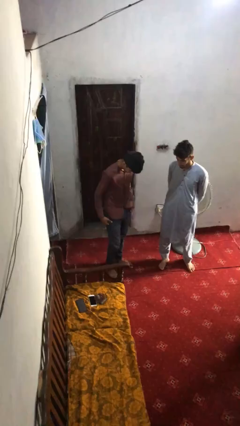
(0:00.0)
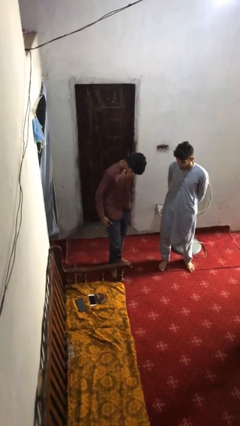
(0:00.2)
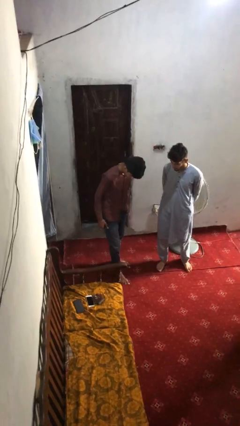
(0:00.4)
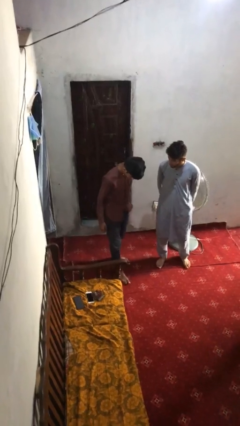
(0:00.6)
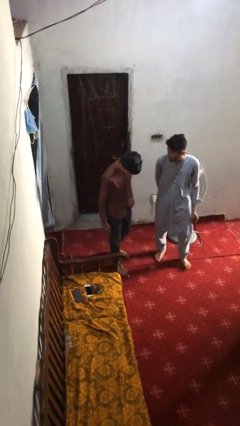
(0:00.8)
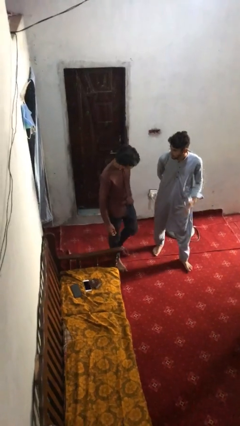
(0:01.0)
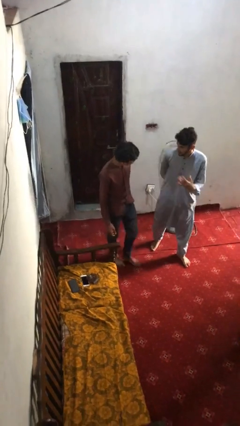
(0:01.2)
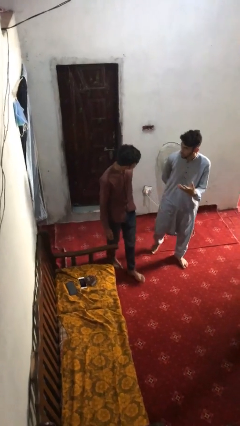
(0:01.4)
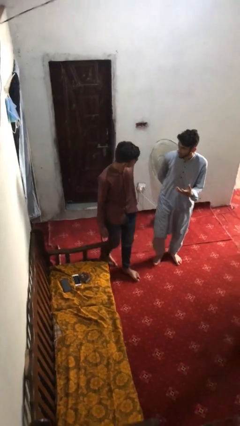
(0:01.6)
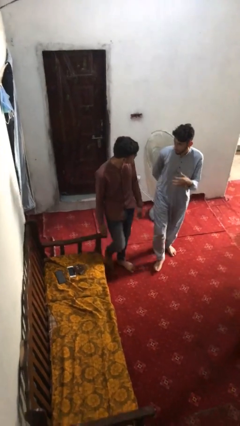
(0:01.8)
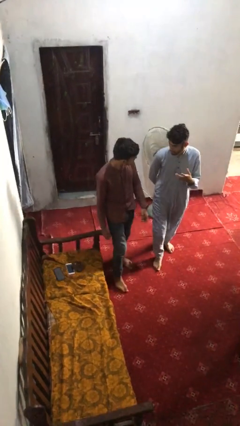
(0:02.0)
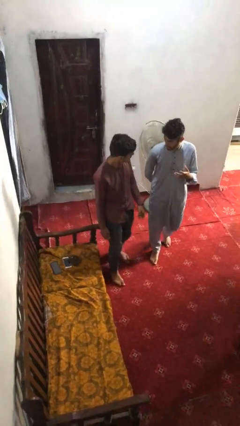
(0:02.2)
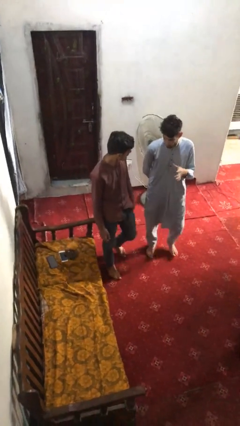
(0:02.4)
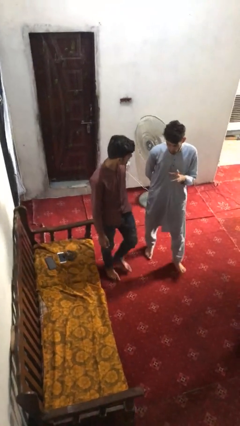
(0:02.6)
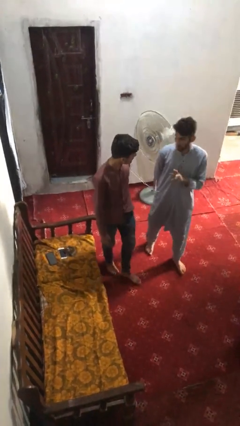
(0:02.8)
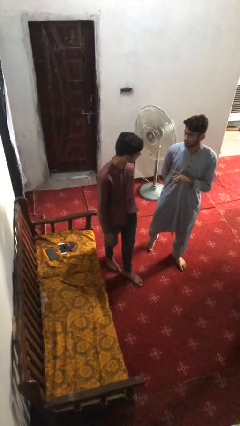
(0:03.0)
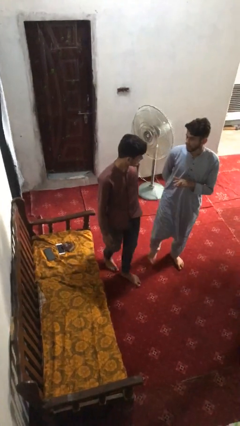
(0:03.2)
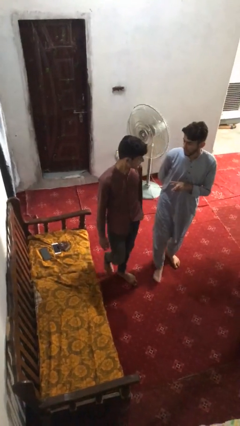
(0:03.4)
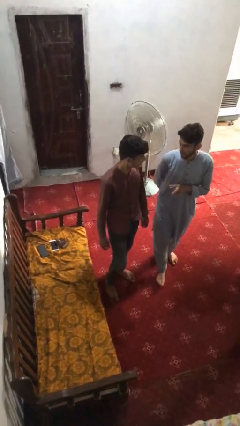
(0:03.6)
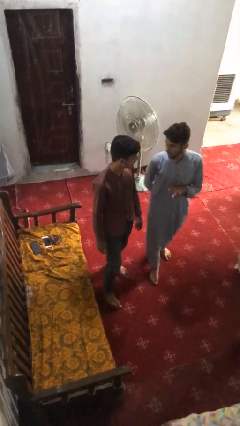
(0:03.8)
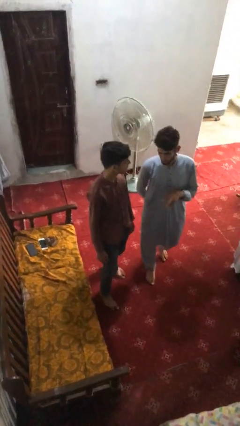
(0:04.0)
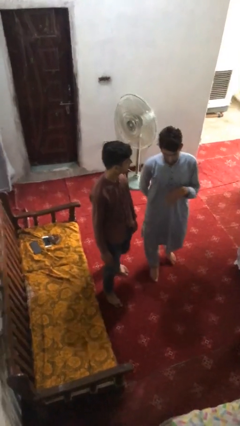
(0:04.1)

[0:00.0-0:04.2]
person talks to person

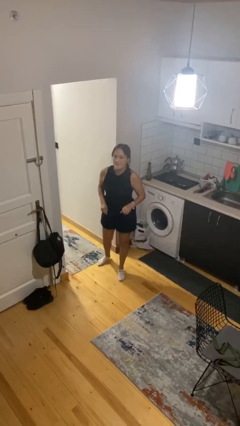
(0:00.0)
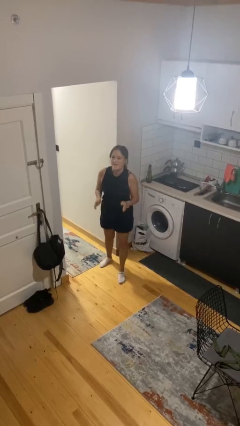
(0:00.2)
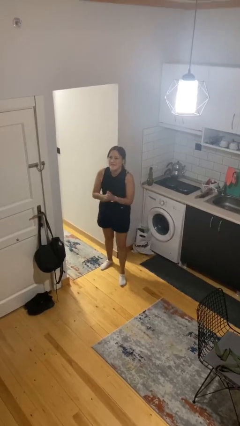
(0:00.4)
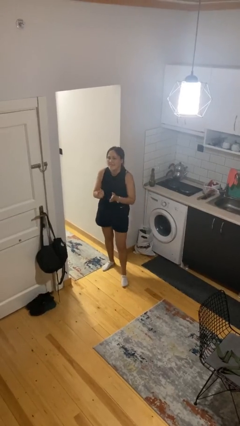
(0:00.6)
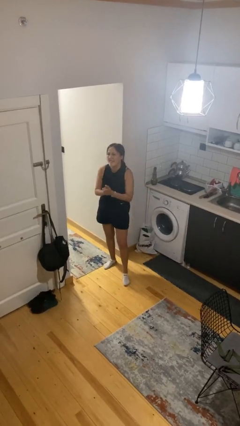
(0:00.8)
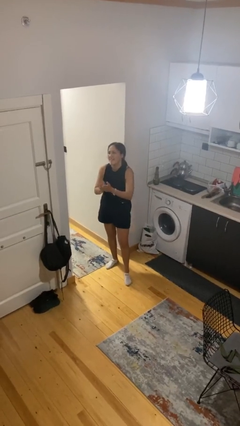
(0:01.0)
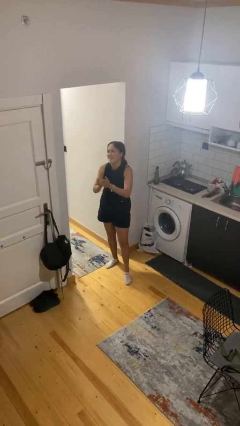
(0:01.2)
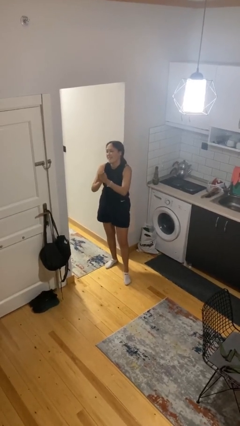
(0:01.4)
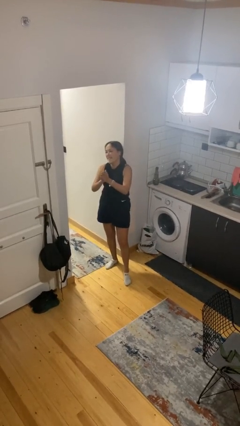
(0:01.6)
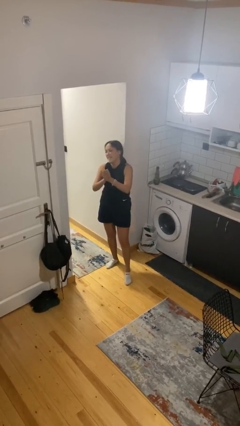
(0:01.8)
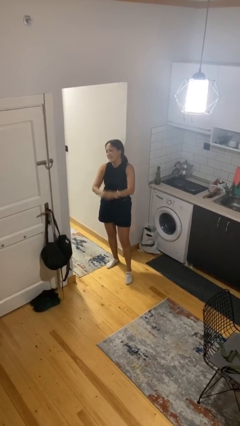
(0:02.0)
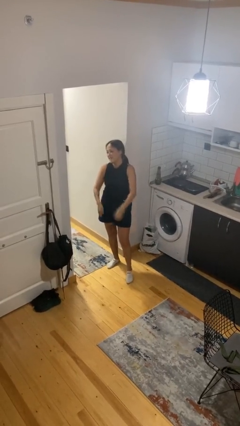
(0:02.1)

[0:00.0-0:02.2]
person claps hands

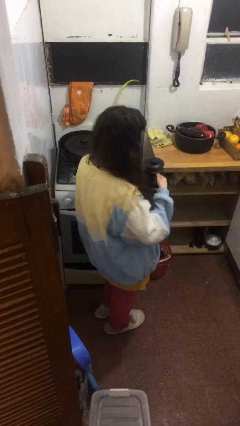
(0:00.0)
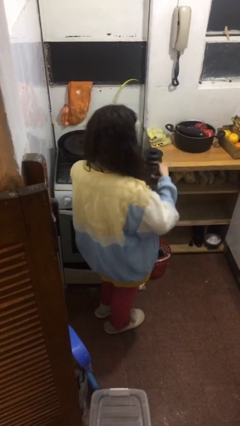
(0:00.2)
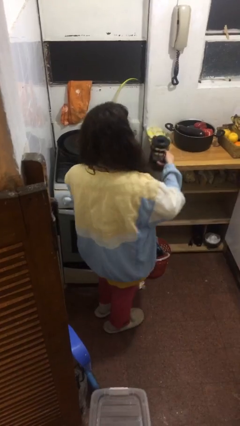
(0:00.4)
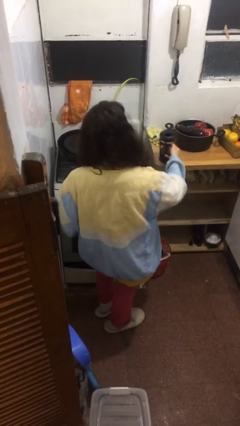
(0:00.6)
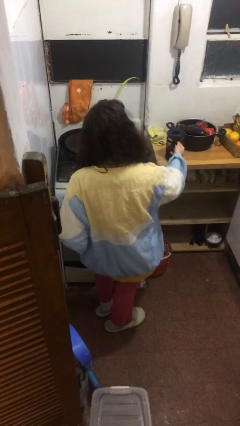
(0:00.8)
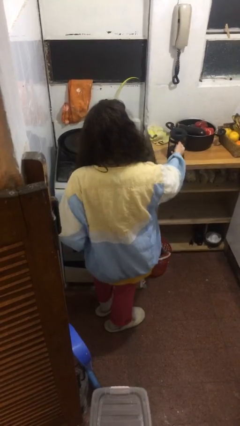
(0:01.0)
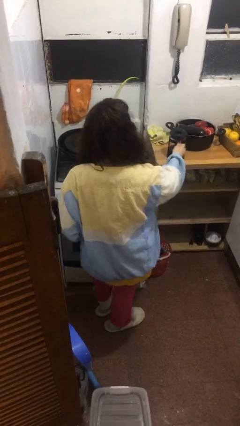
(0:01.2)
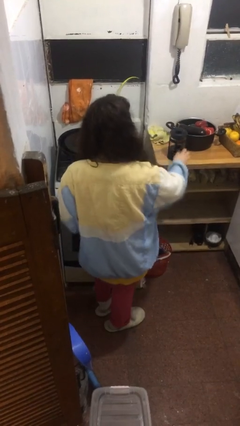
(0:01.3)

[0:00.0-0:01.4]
person puts down object on countertop

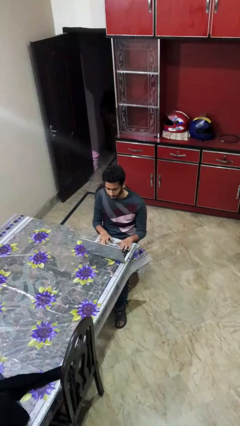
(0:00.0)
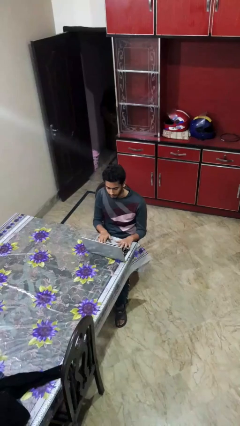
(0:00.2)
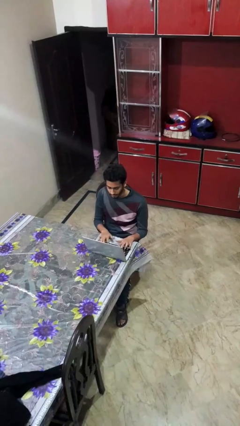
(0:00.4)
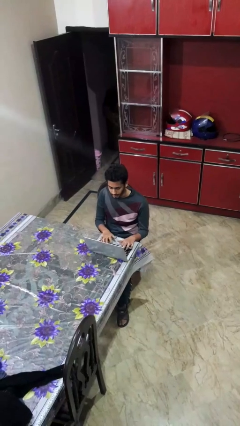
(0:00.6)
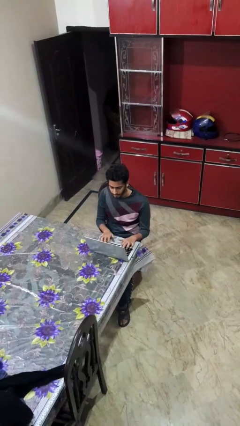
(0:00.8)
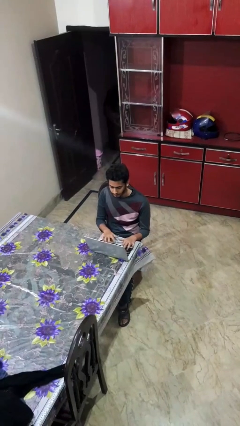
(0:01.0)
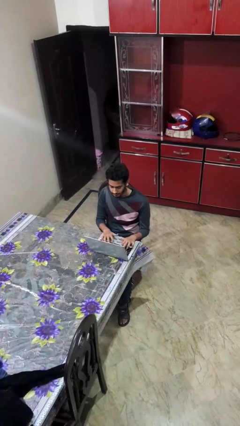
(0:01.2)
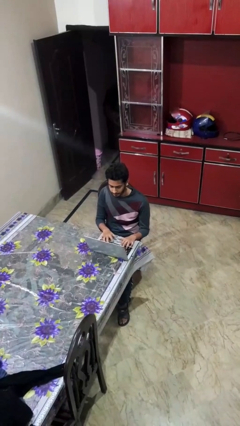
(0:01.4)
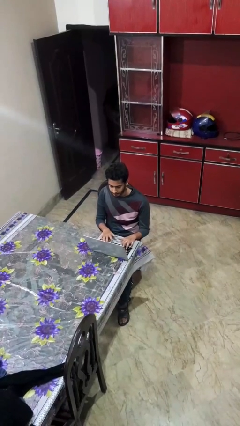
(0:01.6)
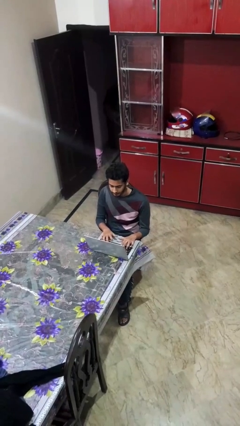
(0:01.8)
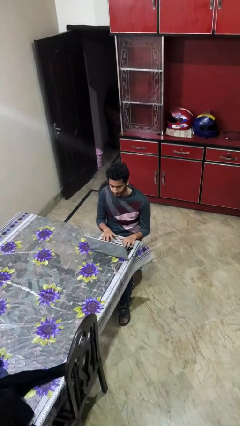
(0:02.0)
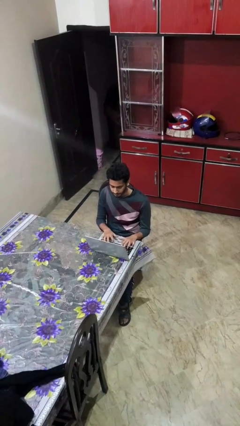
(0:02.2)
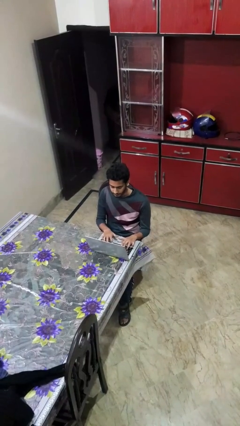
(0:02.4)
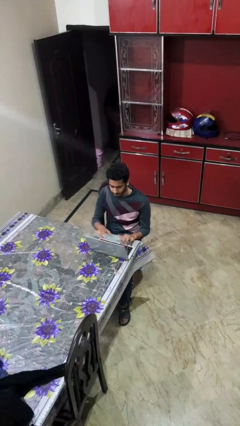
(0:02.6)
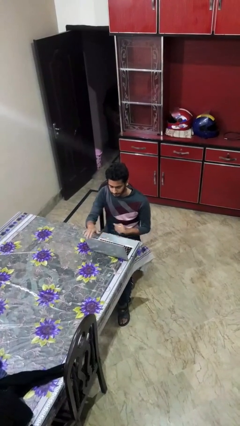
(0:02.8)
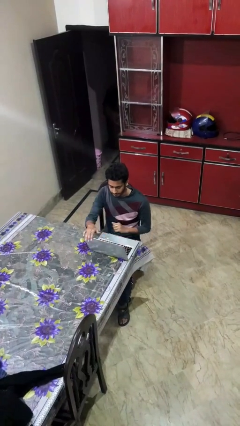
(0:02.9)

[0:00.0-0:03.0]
person interacts with laptop

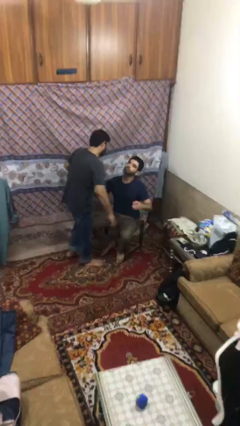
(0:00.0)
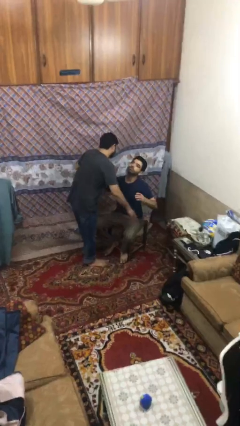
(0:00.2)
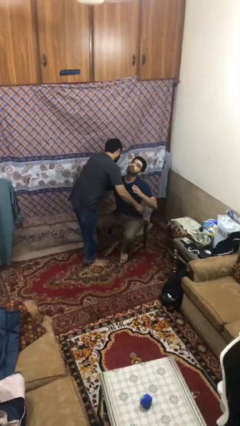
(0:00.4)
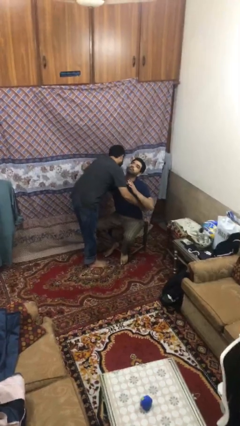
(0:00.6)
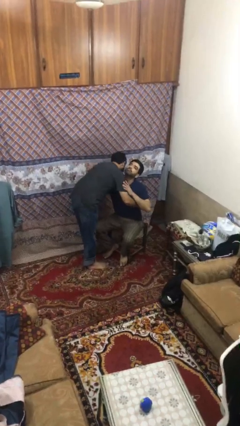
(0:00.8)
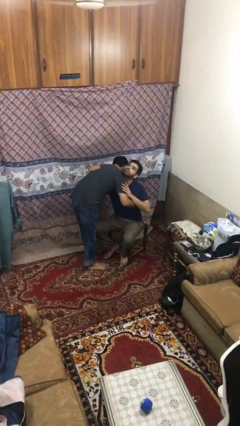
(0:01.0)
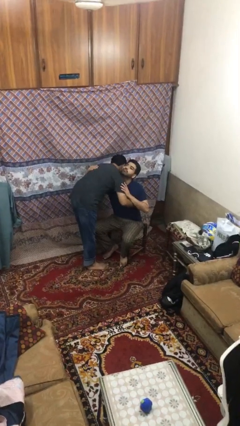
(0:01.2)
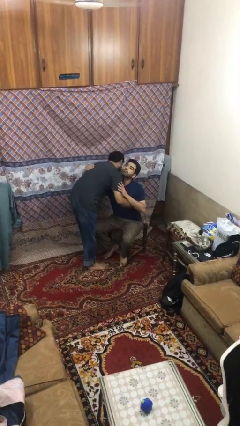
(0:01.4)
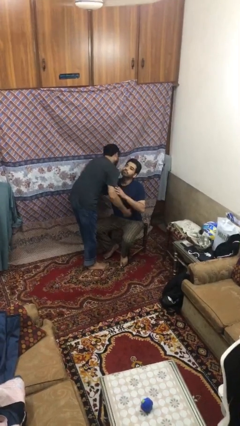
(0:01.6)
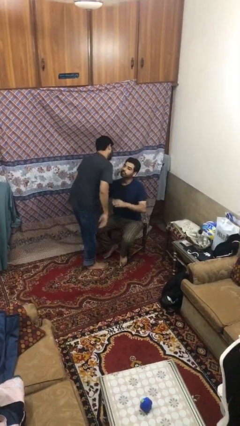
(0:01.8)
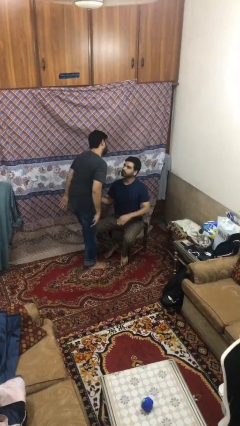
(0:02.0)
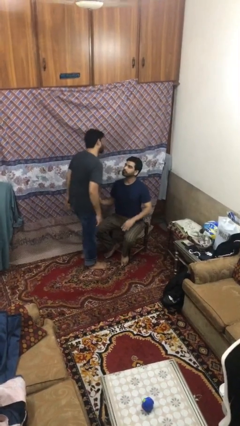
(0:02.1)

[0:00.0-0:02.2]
person embraces person

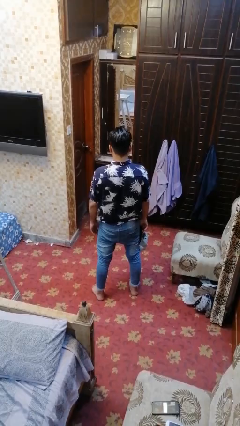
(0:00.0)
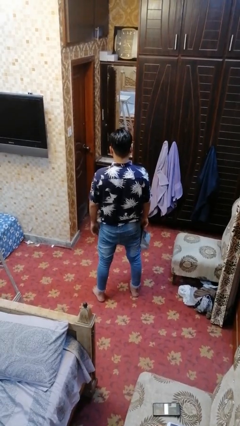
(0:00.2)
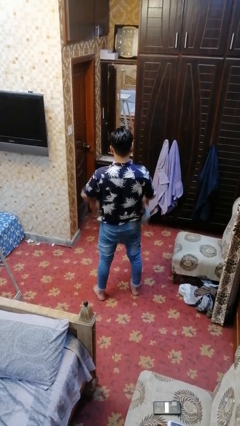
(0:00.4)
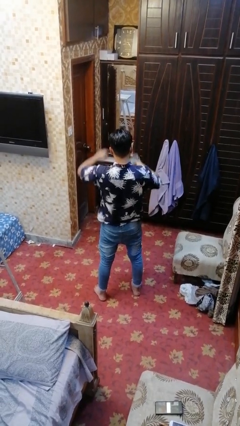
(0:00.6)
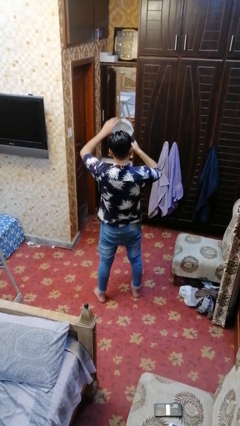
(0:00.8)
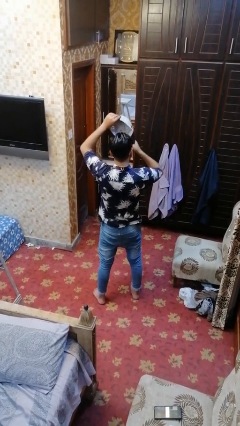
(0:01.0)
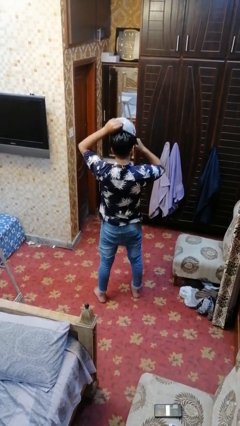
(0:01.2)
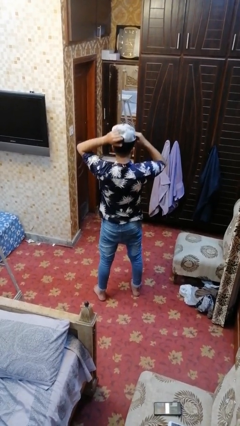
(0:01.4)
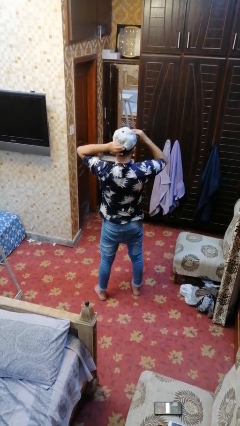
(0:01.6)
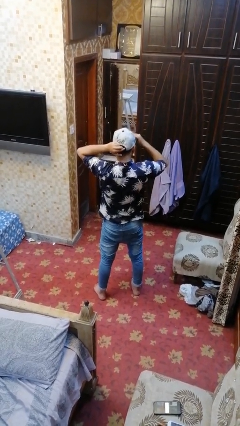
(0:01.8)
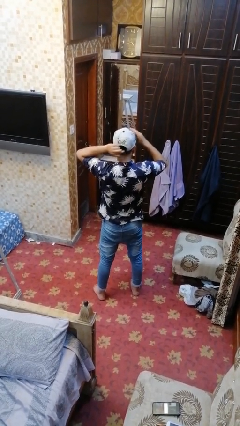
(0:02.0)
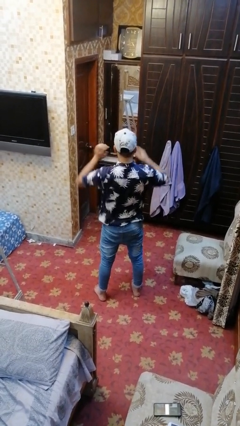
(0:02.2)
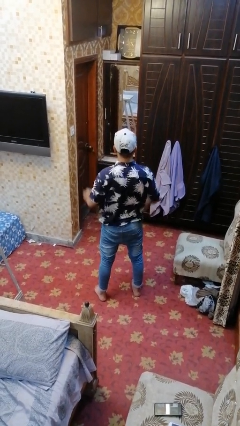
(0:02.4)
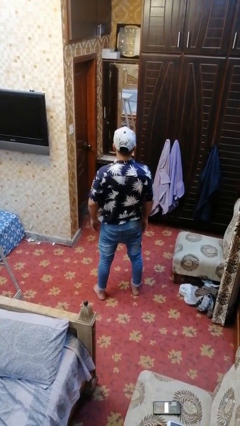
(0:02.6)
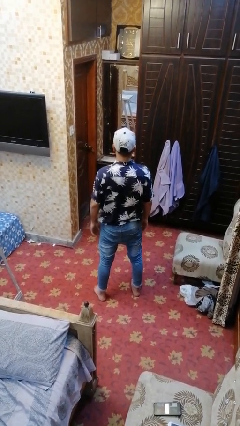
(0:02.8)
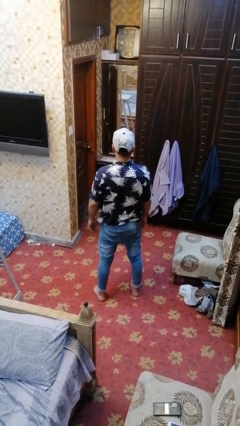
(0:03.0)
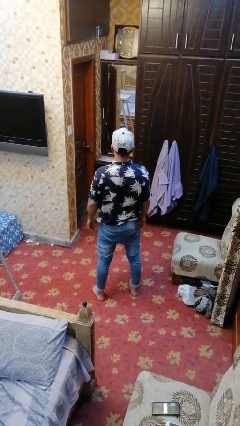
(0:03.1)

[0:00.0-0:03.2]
person puts on hat

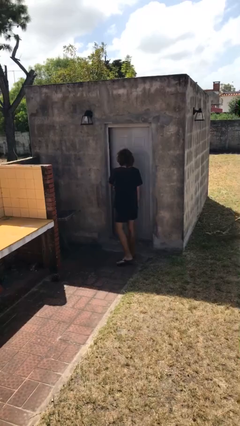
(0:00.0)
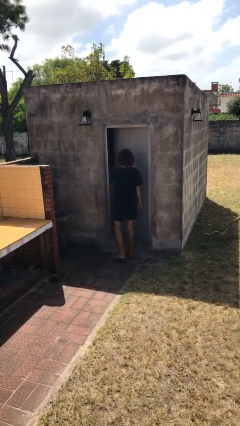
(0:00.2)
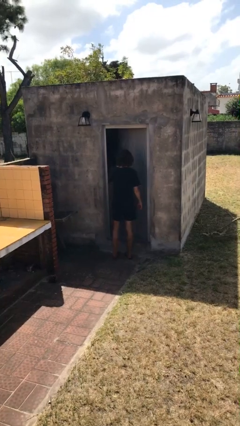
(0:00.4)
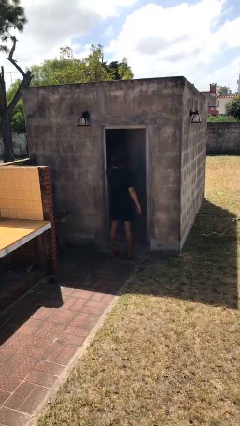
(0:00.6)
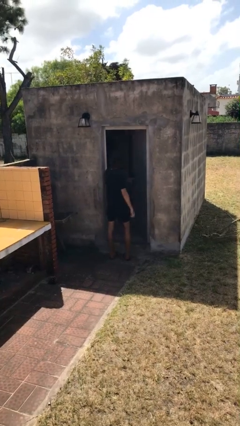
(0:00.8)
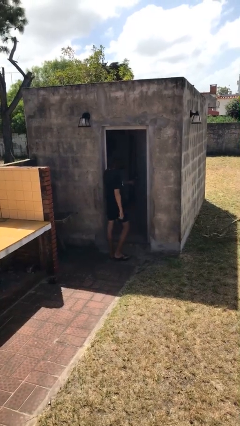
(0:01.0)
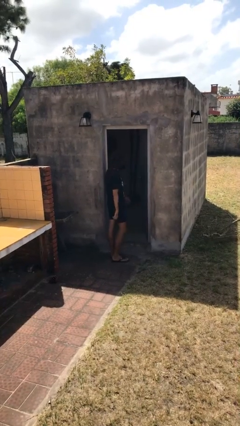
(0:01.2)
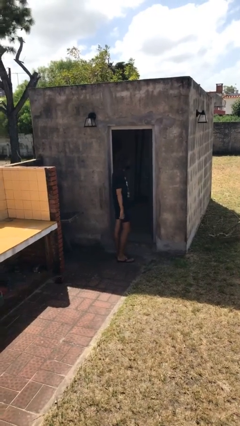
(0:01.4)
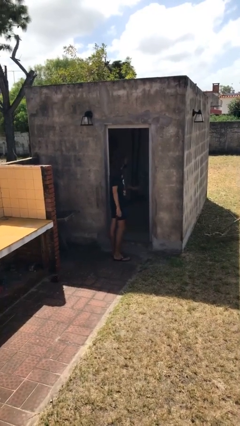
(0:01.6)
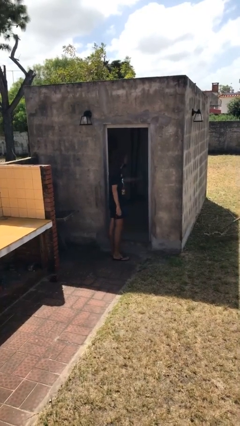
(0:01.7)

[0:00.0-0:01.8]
person opens facility door
